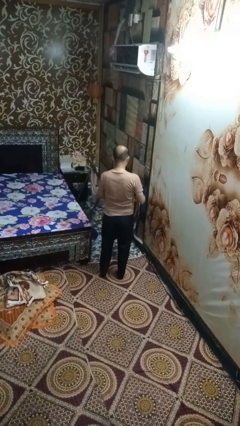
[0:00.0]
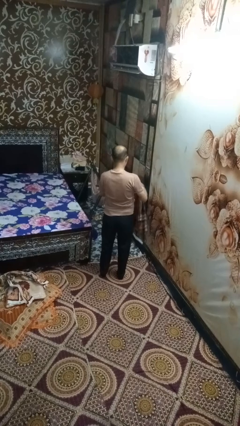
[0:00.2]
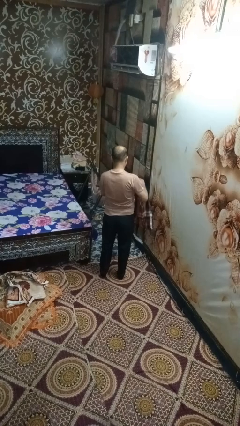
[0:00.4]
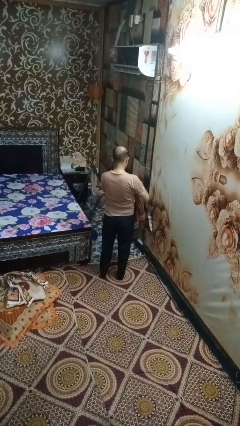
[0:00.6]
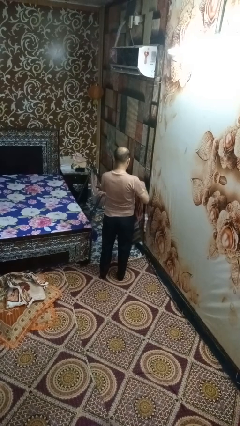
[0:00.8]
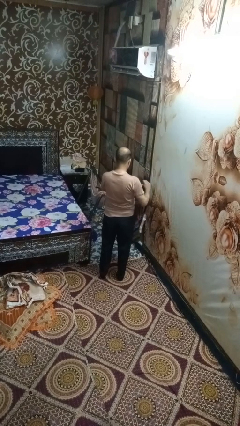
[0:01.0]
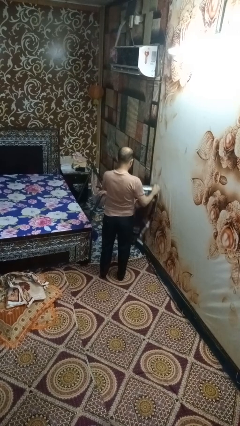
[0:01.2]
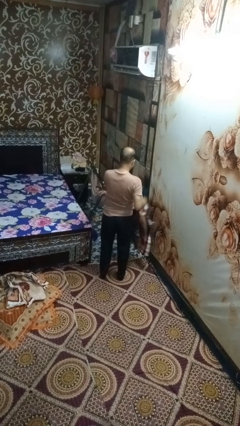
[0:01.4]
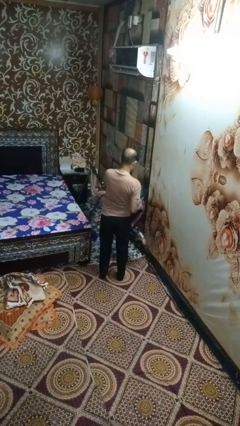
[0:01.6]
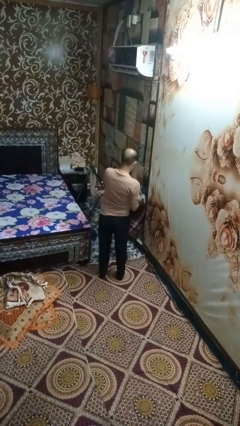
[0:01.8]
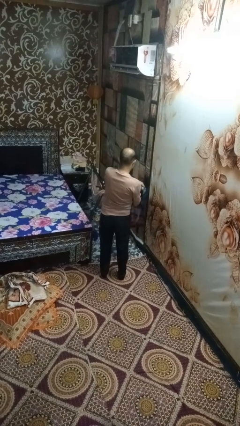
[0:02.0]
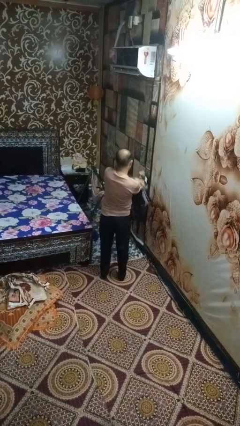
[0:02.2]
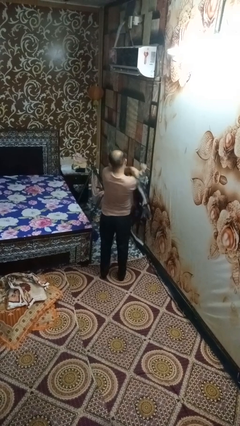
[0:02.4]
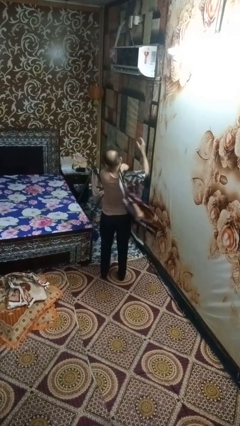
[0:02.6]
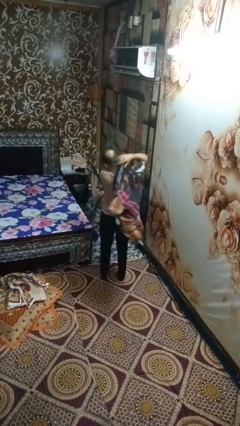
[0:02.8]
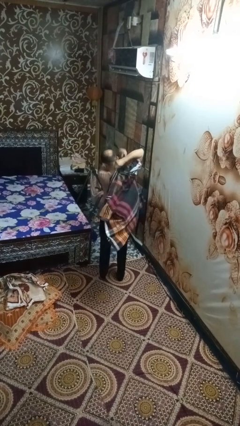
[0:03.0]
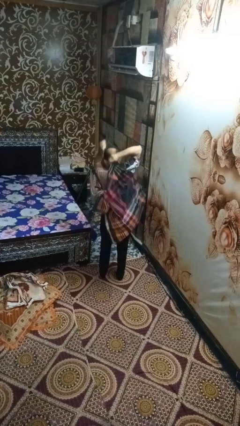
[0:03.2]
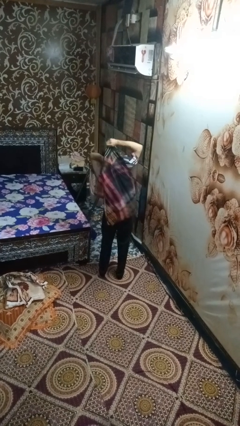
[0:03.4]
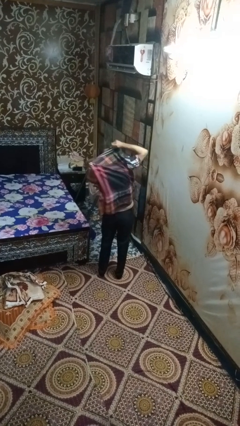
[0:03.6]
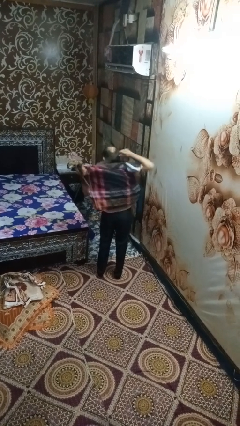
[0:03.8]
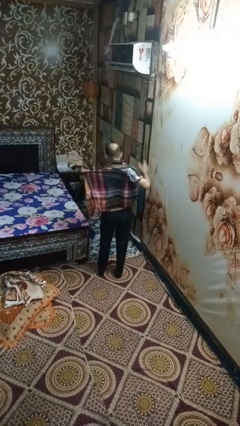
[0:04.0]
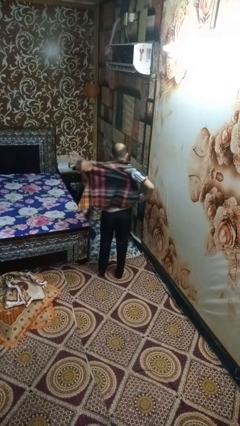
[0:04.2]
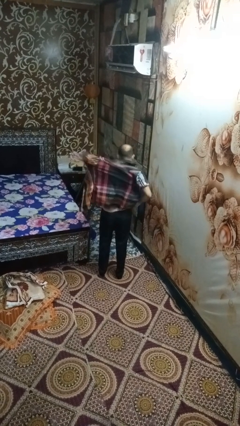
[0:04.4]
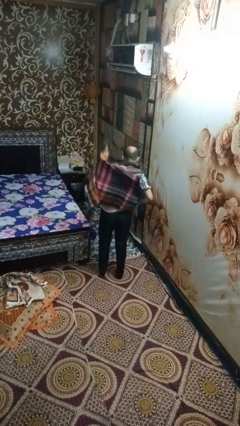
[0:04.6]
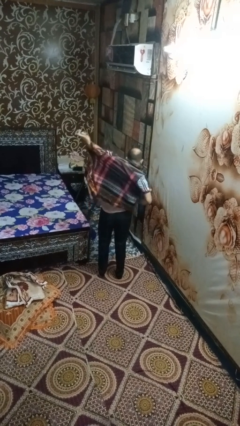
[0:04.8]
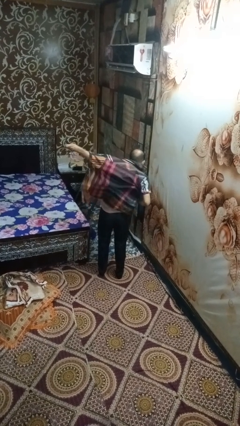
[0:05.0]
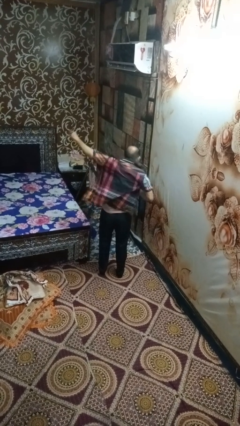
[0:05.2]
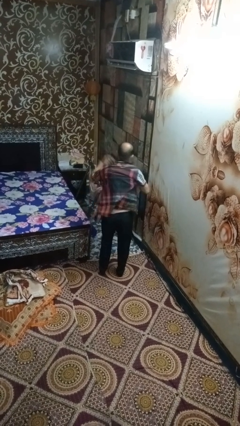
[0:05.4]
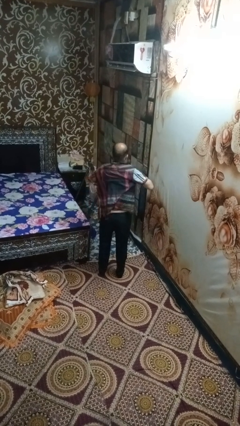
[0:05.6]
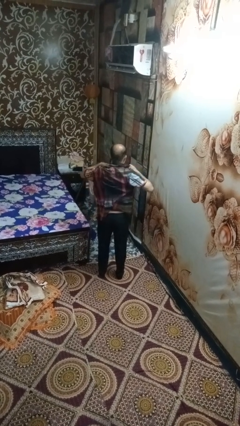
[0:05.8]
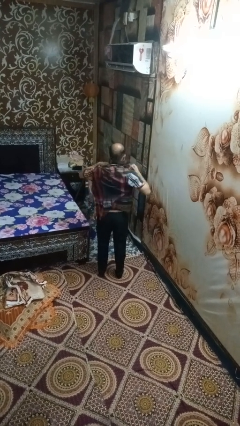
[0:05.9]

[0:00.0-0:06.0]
person puts on shirt

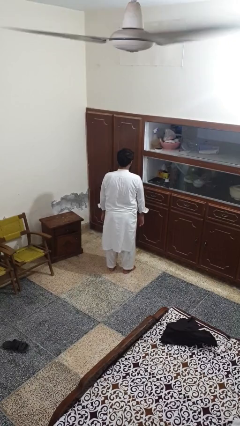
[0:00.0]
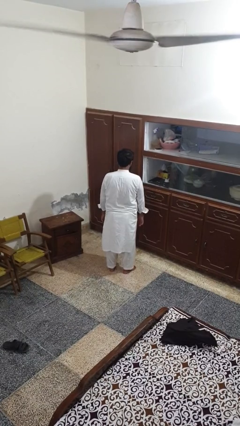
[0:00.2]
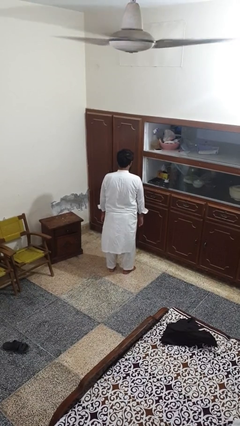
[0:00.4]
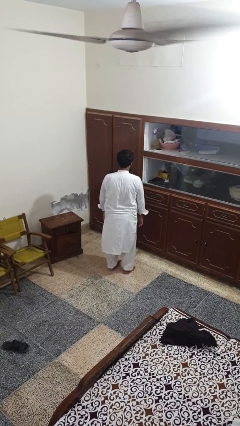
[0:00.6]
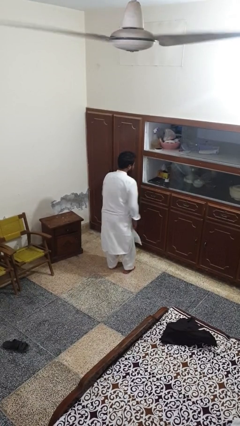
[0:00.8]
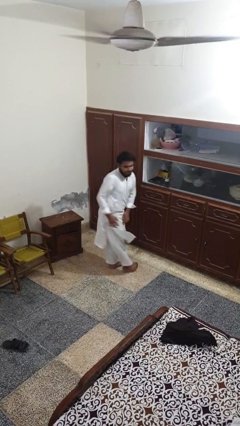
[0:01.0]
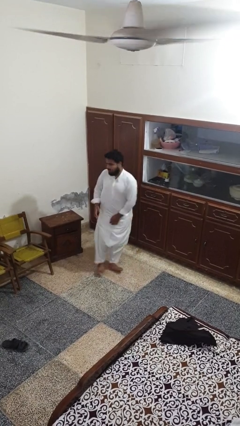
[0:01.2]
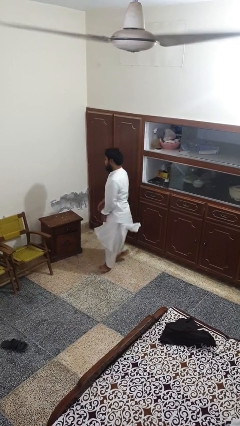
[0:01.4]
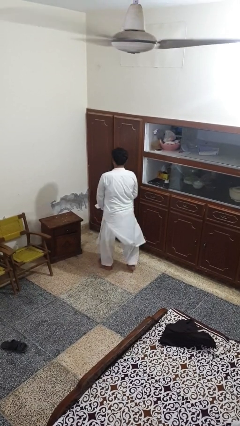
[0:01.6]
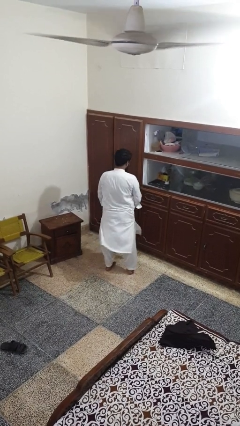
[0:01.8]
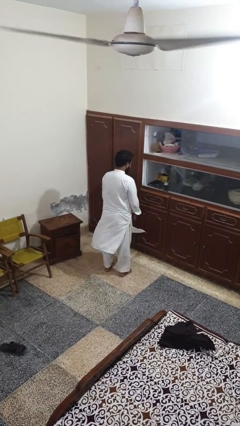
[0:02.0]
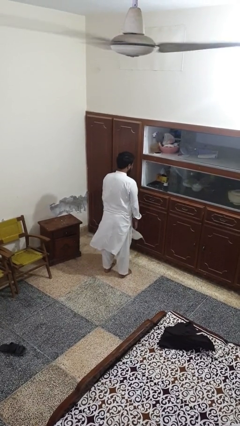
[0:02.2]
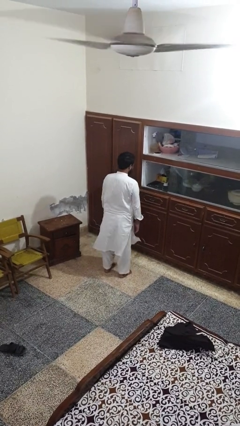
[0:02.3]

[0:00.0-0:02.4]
person twirls

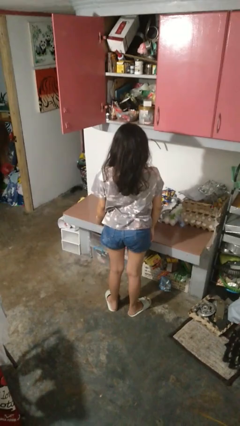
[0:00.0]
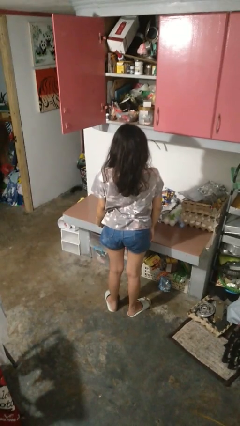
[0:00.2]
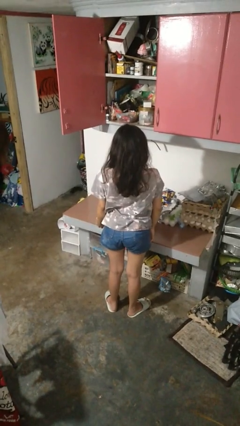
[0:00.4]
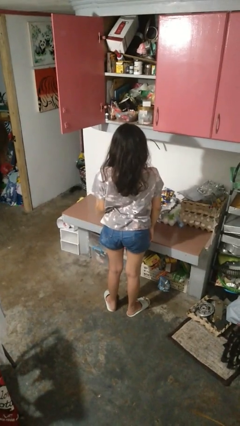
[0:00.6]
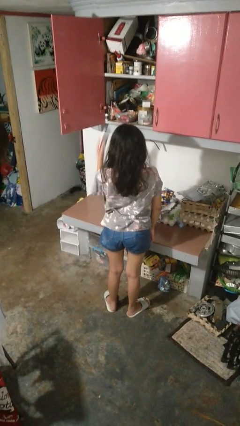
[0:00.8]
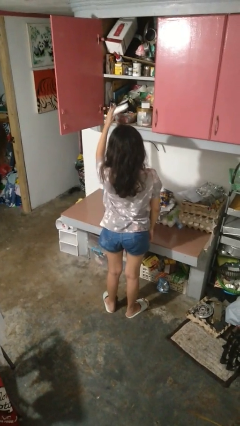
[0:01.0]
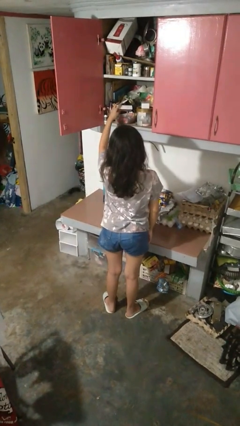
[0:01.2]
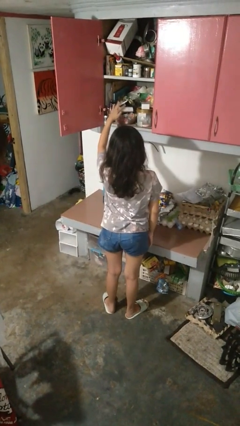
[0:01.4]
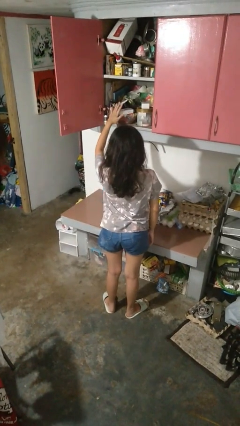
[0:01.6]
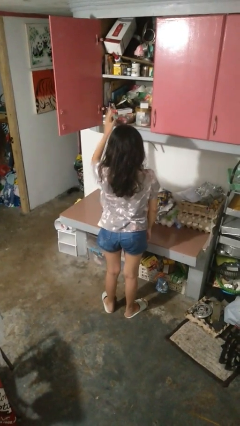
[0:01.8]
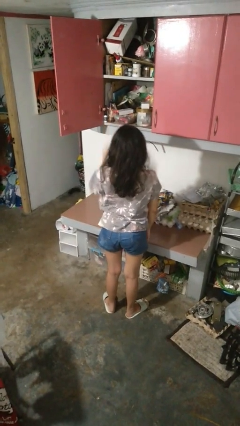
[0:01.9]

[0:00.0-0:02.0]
person puts object in cabinet

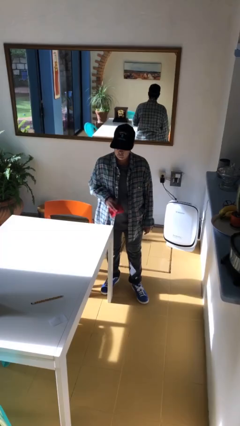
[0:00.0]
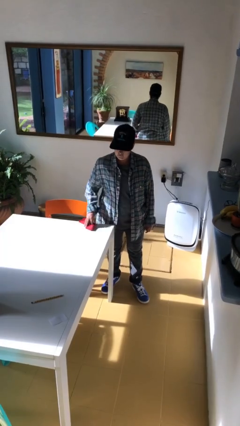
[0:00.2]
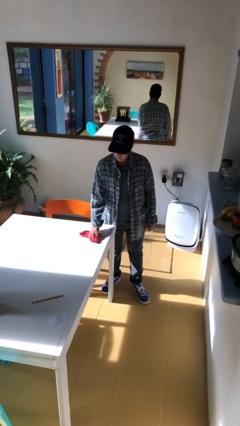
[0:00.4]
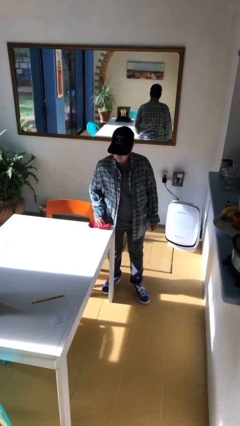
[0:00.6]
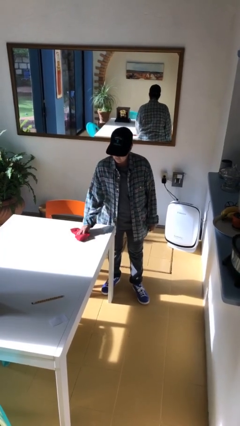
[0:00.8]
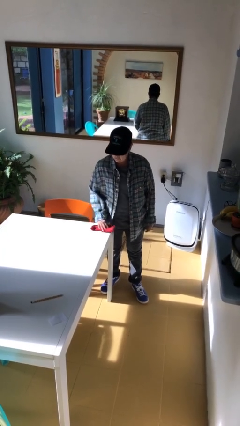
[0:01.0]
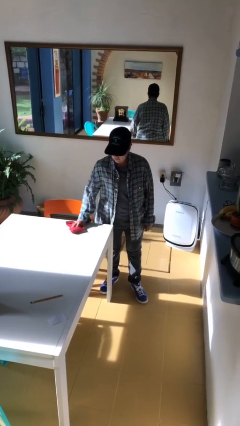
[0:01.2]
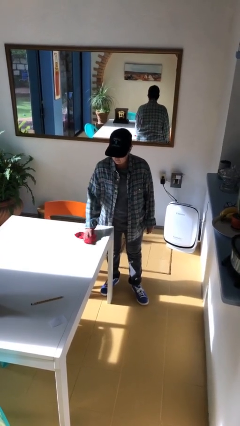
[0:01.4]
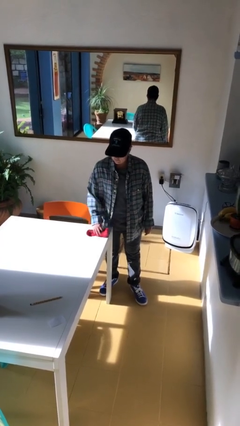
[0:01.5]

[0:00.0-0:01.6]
person cleans table with rag

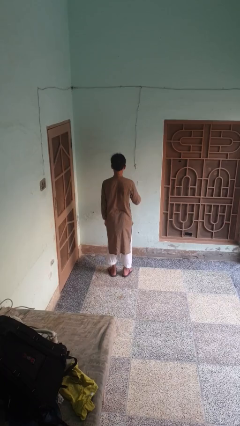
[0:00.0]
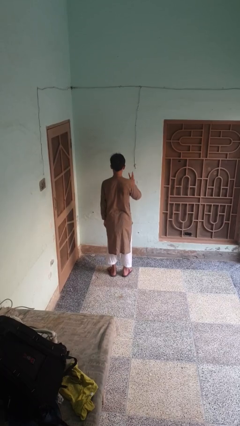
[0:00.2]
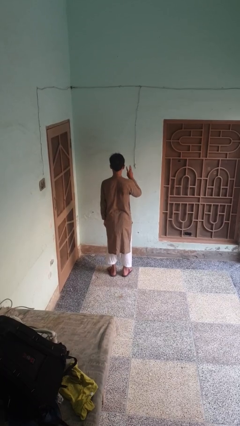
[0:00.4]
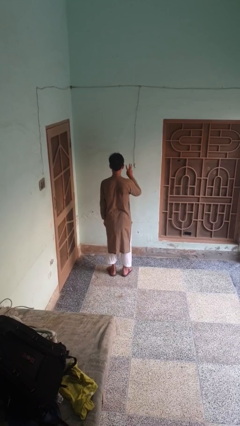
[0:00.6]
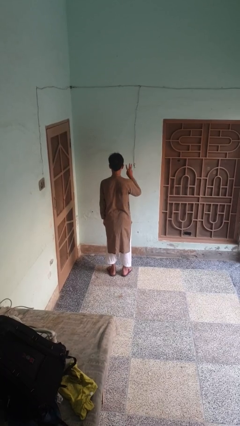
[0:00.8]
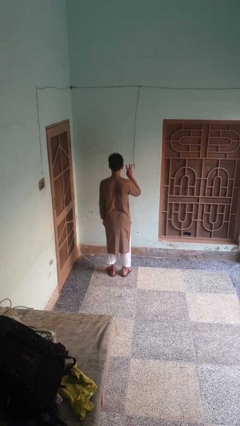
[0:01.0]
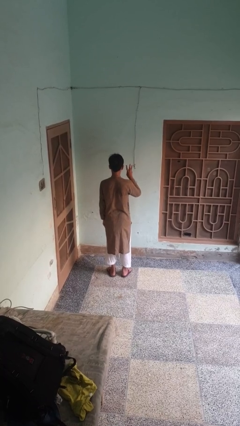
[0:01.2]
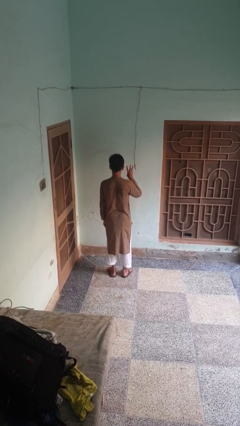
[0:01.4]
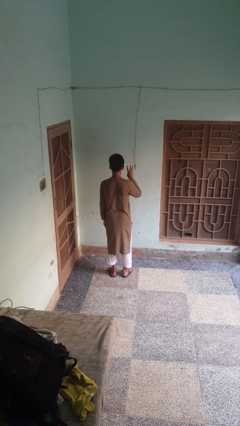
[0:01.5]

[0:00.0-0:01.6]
person gestures number three

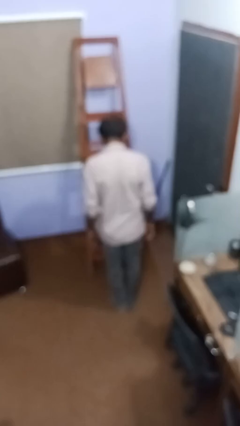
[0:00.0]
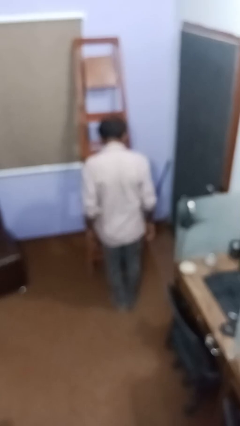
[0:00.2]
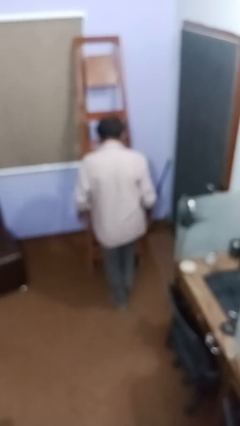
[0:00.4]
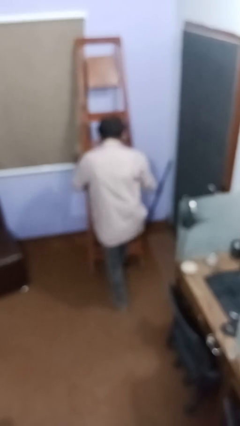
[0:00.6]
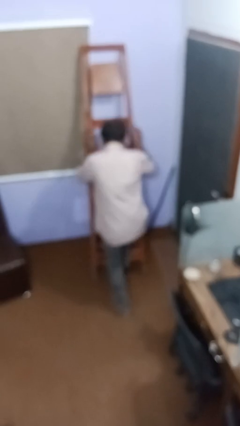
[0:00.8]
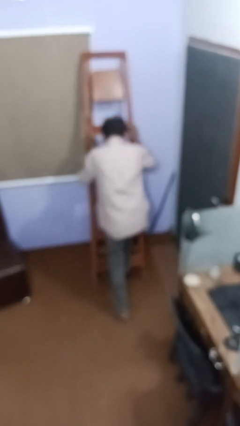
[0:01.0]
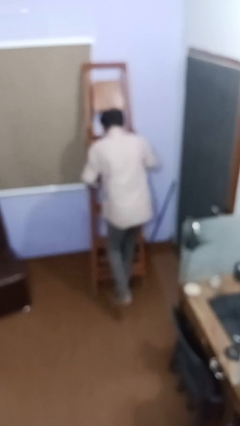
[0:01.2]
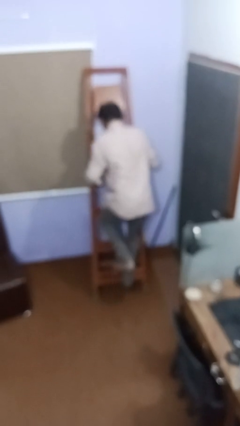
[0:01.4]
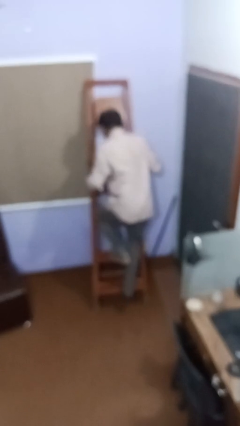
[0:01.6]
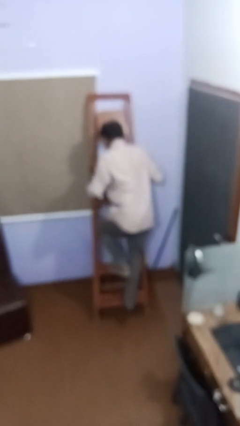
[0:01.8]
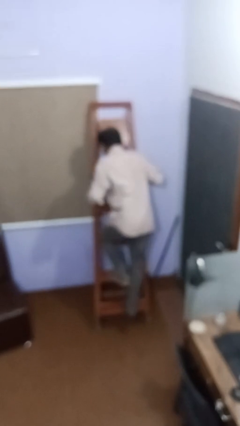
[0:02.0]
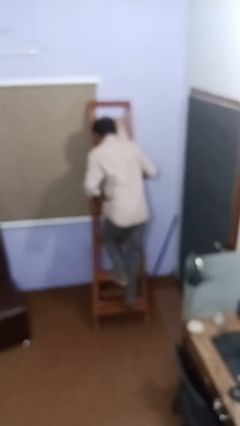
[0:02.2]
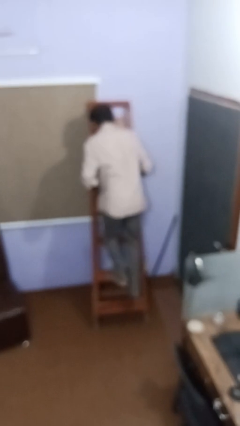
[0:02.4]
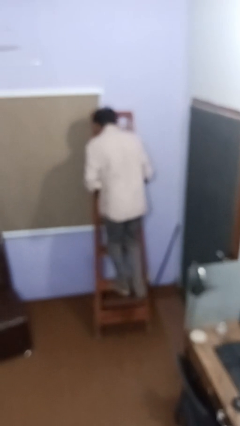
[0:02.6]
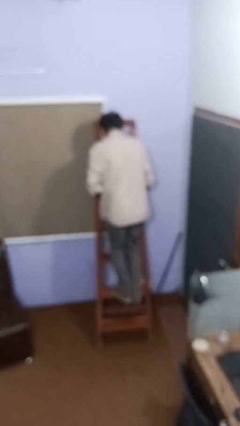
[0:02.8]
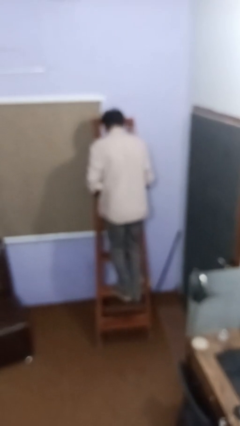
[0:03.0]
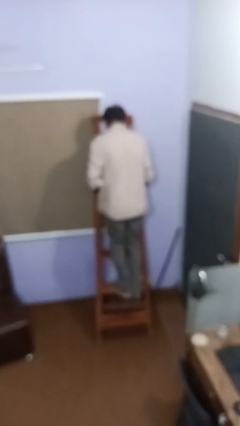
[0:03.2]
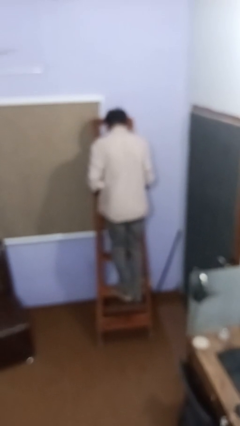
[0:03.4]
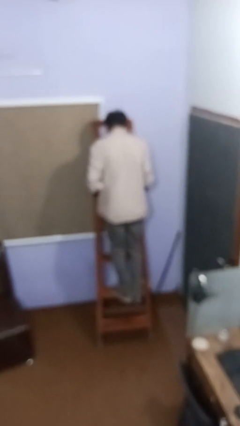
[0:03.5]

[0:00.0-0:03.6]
person climbs up ladder

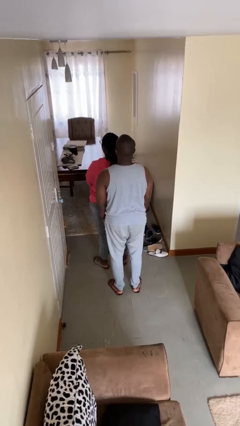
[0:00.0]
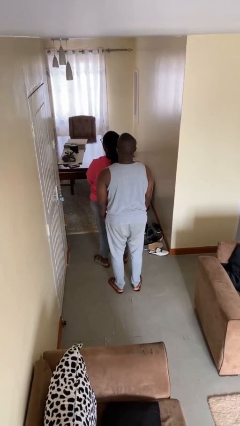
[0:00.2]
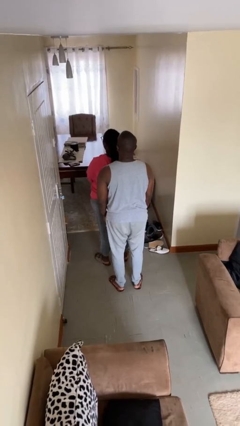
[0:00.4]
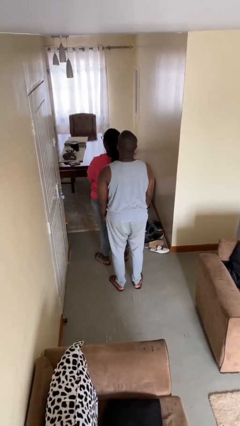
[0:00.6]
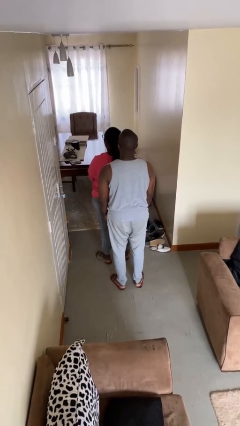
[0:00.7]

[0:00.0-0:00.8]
person brushes hair of person
